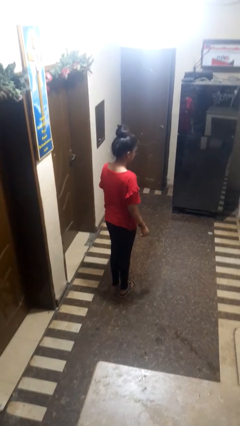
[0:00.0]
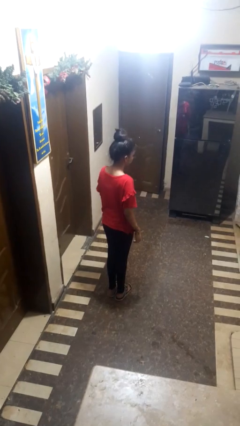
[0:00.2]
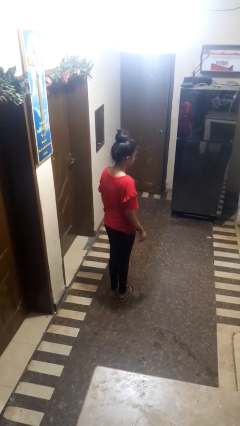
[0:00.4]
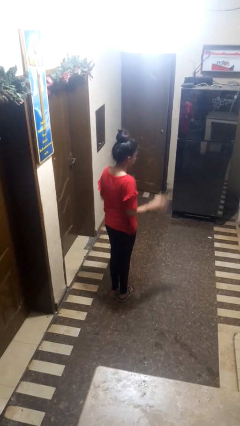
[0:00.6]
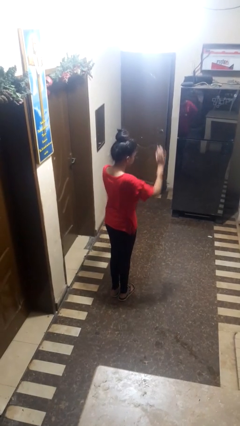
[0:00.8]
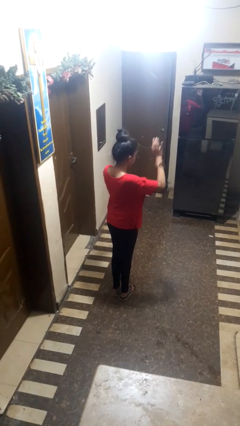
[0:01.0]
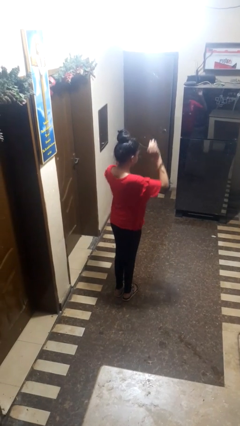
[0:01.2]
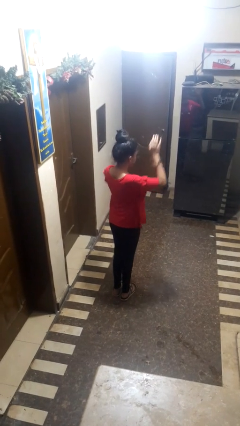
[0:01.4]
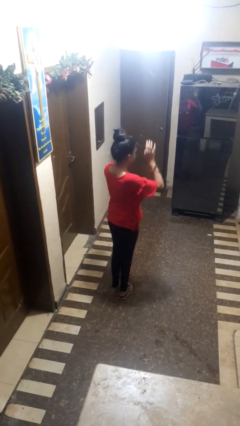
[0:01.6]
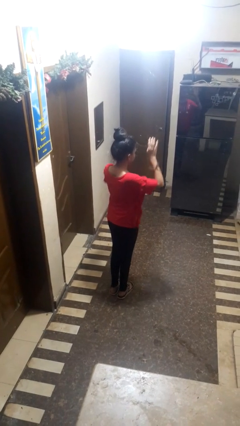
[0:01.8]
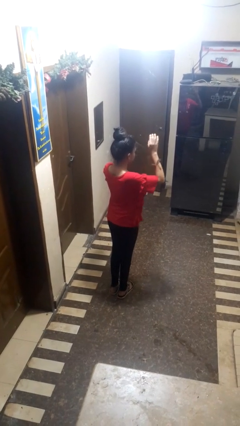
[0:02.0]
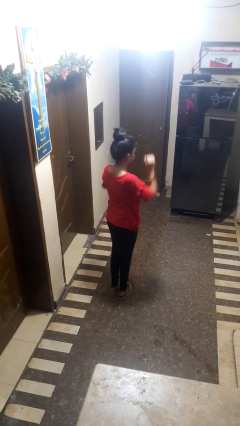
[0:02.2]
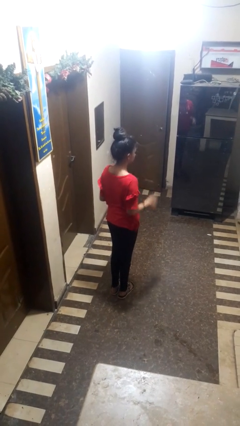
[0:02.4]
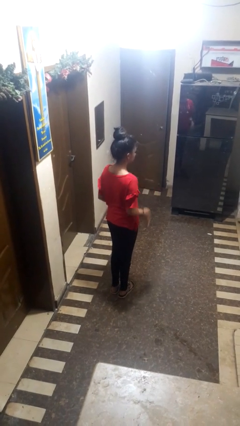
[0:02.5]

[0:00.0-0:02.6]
person dances in place

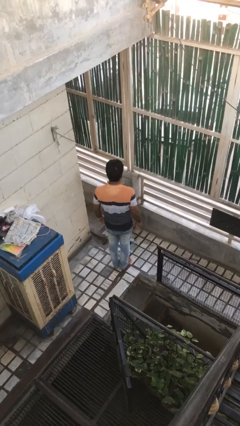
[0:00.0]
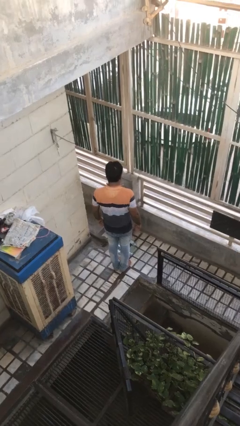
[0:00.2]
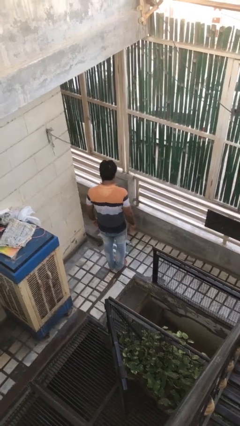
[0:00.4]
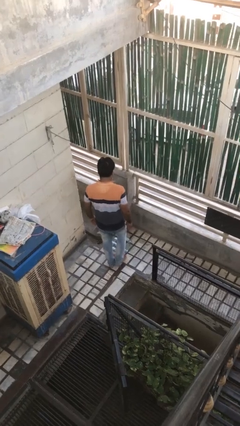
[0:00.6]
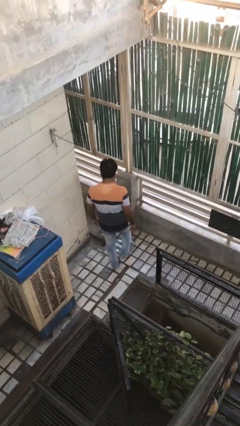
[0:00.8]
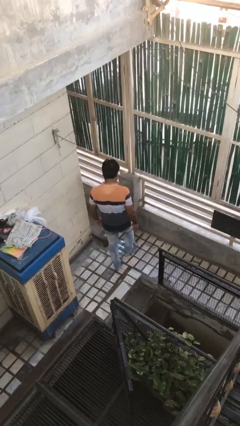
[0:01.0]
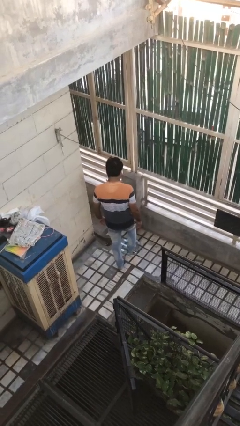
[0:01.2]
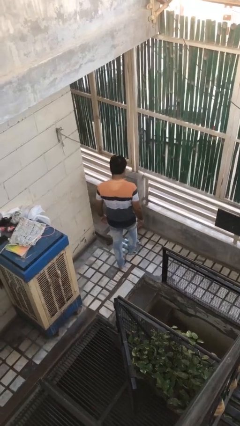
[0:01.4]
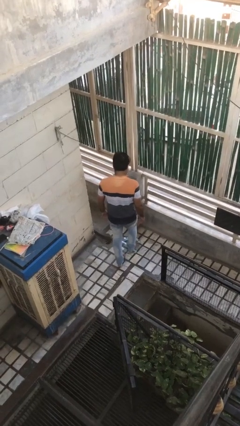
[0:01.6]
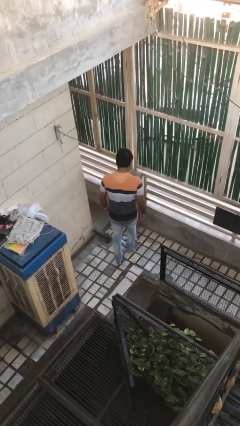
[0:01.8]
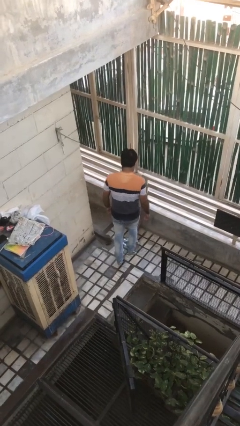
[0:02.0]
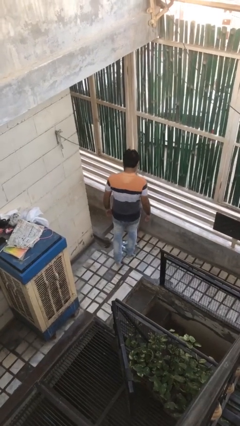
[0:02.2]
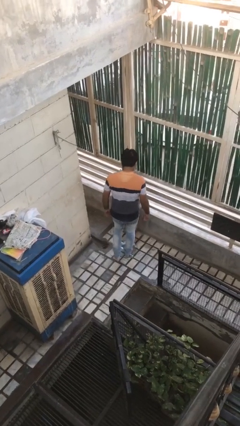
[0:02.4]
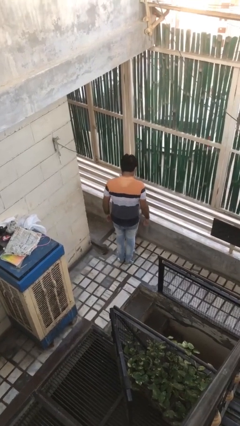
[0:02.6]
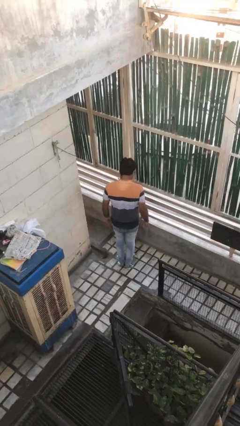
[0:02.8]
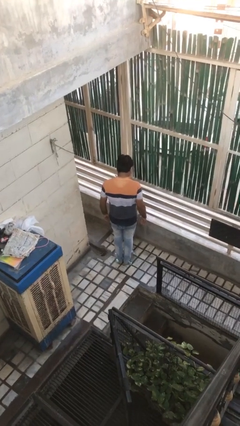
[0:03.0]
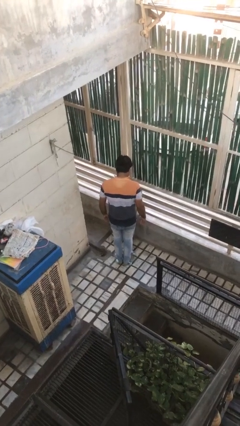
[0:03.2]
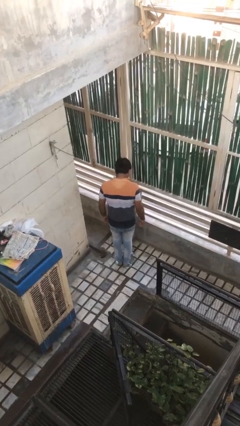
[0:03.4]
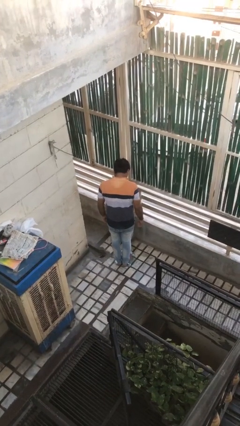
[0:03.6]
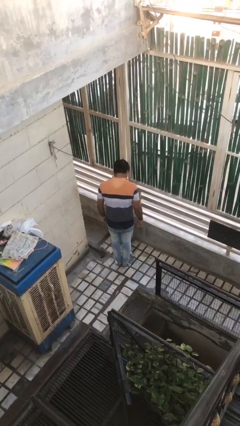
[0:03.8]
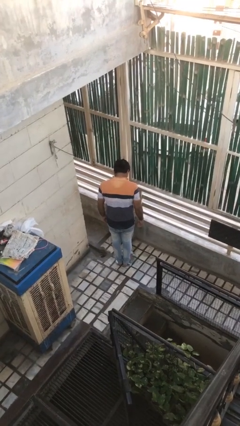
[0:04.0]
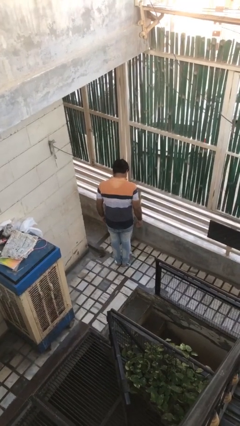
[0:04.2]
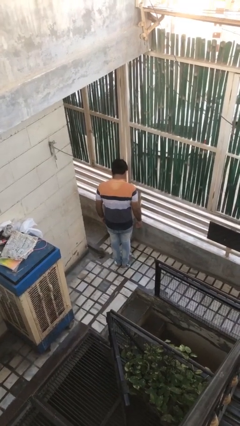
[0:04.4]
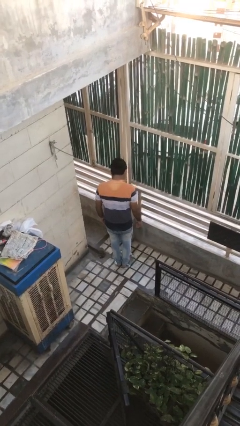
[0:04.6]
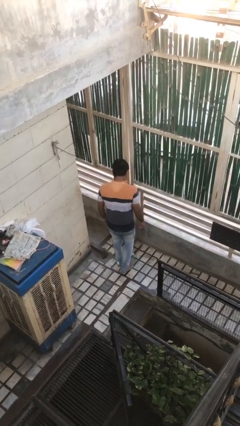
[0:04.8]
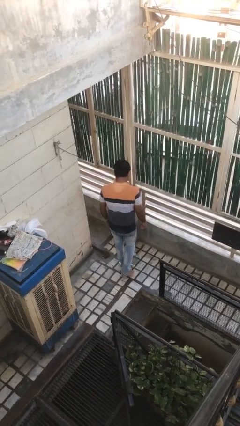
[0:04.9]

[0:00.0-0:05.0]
person uses bodyweight scale

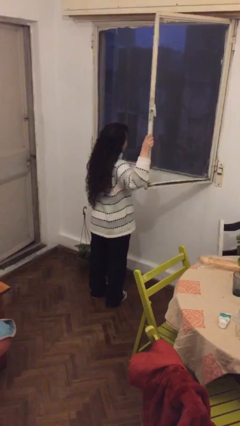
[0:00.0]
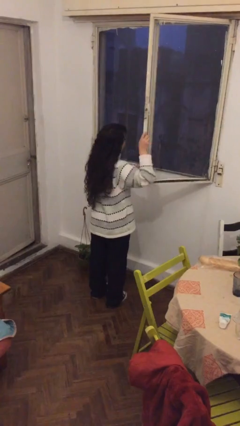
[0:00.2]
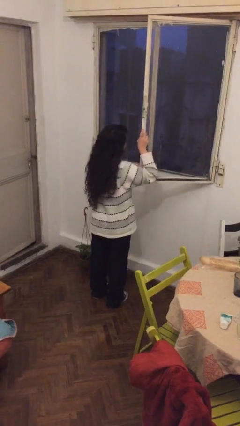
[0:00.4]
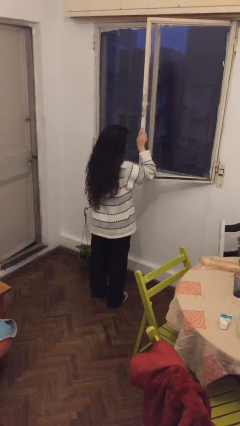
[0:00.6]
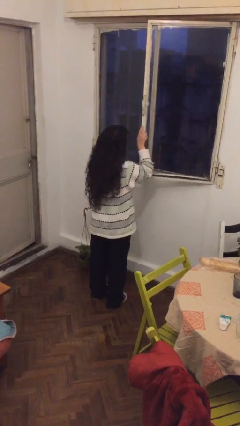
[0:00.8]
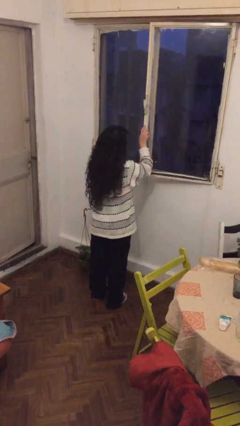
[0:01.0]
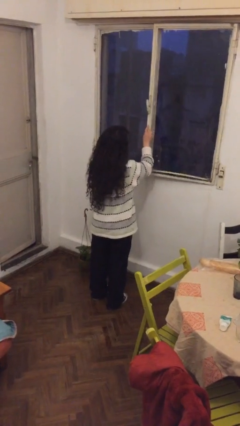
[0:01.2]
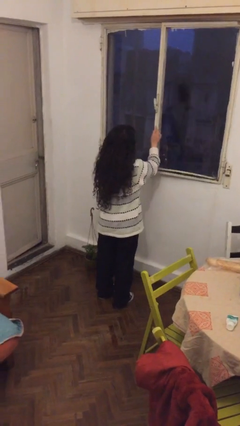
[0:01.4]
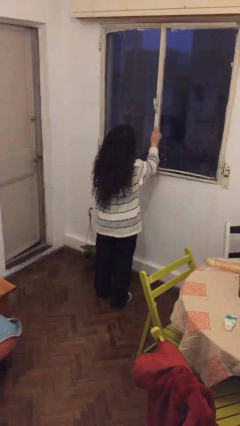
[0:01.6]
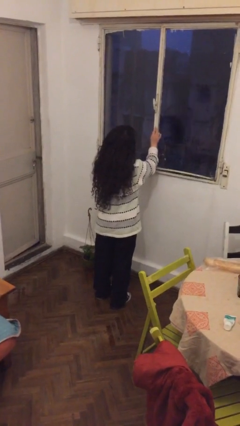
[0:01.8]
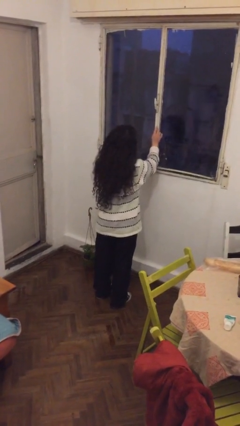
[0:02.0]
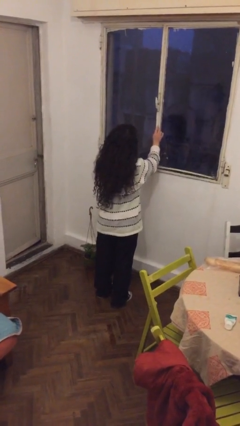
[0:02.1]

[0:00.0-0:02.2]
person closes home window

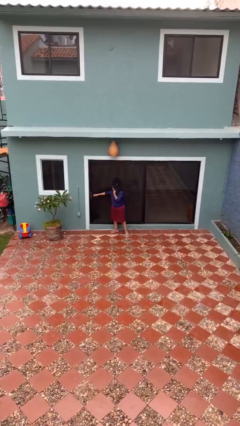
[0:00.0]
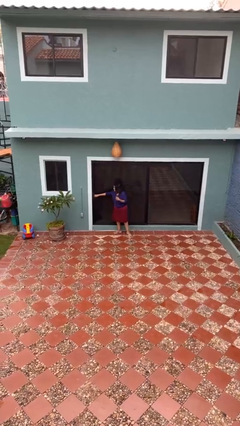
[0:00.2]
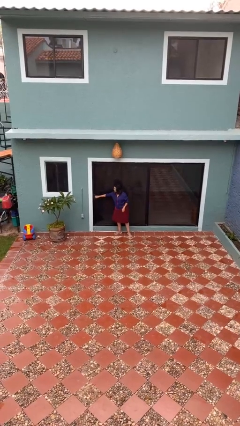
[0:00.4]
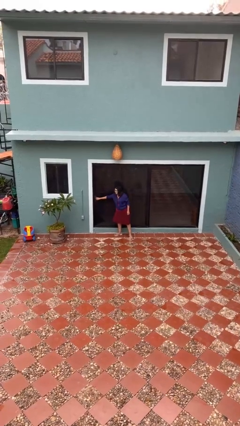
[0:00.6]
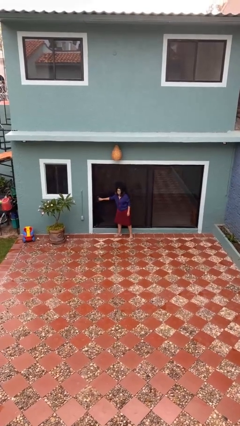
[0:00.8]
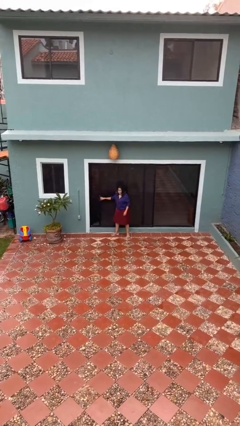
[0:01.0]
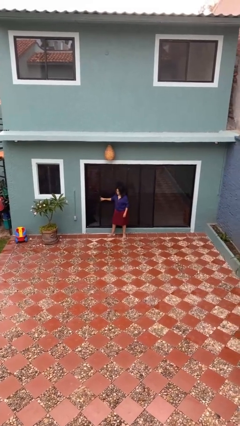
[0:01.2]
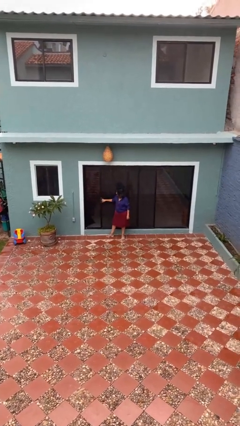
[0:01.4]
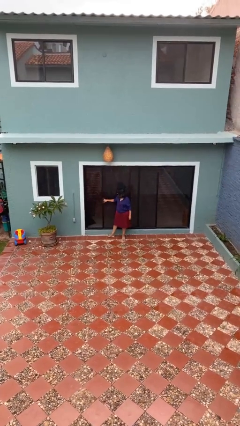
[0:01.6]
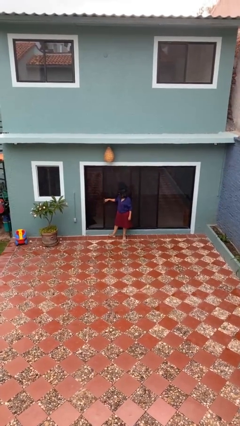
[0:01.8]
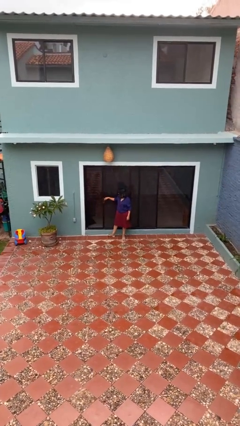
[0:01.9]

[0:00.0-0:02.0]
person opens sliding door

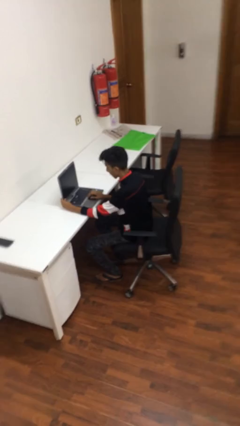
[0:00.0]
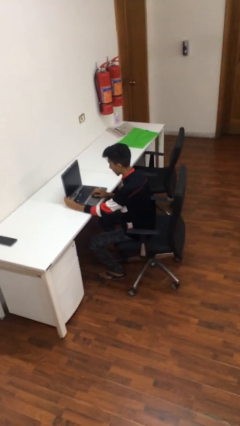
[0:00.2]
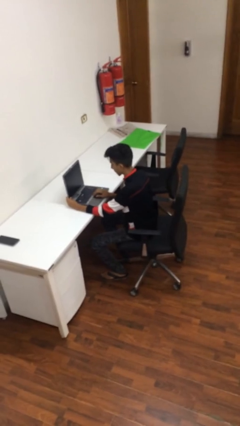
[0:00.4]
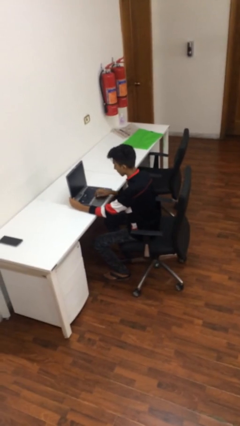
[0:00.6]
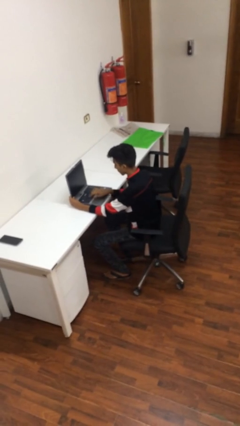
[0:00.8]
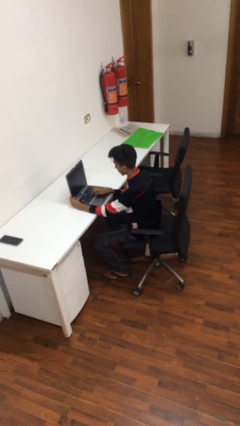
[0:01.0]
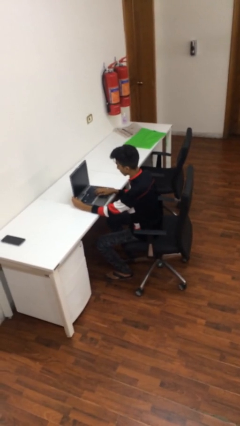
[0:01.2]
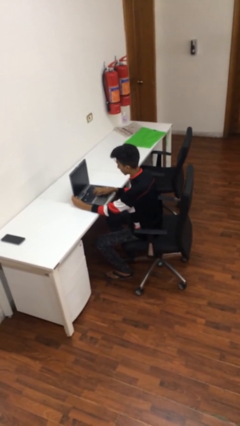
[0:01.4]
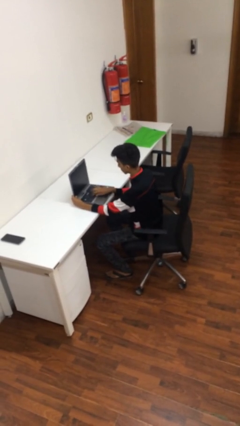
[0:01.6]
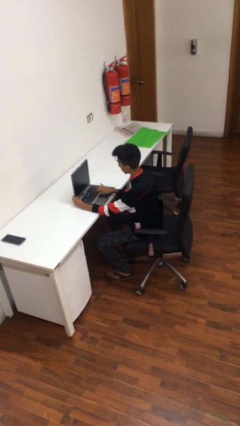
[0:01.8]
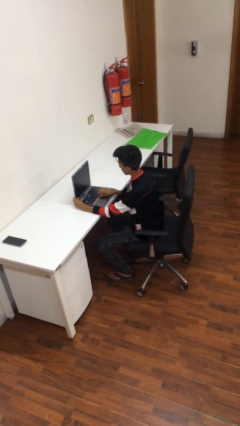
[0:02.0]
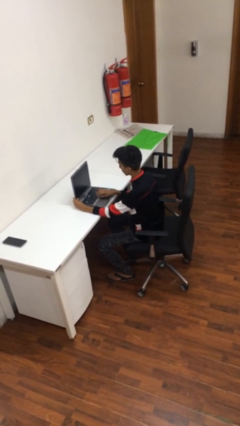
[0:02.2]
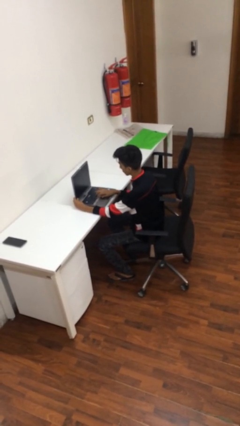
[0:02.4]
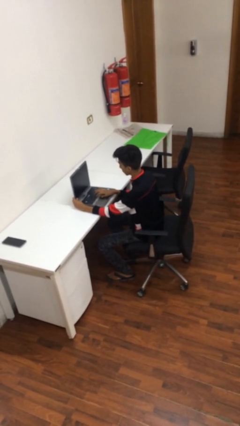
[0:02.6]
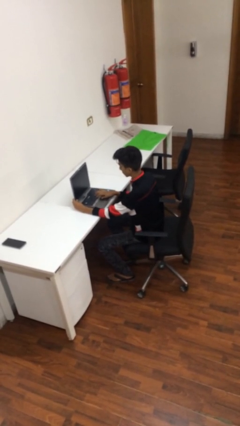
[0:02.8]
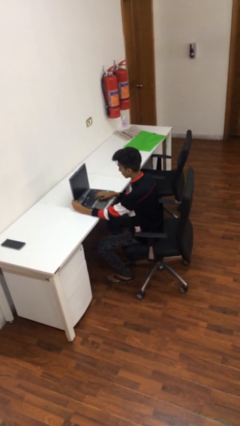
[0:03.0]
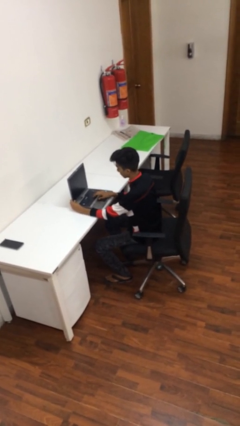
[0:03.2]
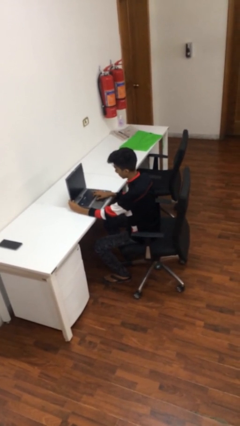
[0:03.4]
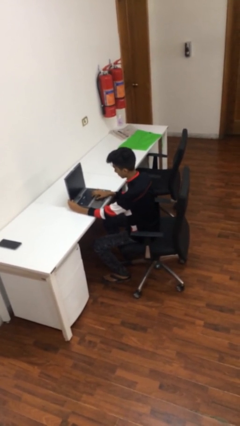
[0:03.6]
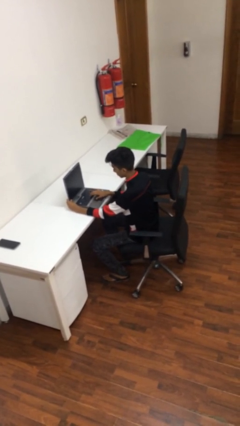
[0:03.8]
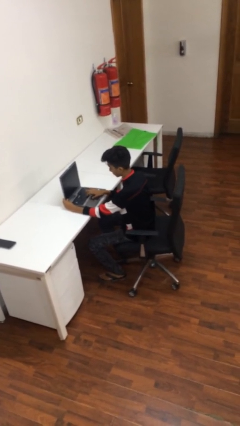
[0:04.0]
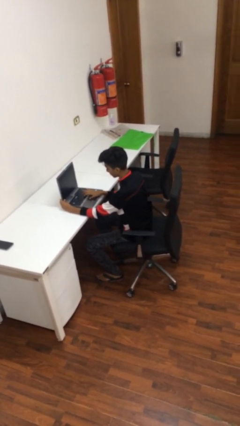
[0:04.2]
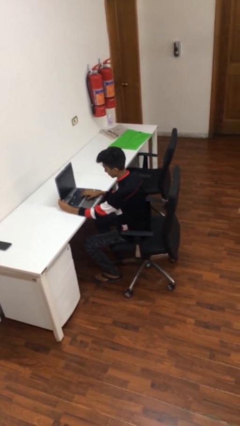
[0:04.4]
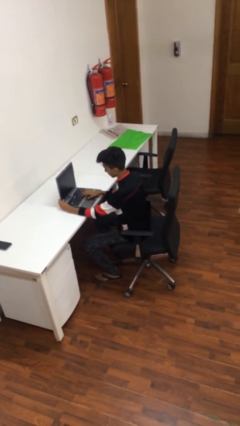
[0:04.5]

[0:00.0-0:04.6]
person interacts with laptop

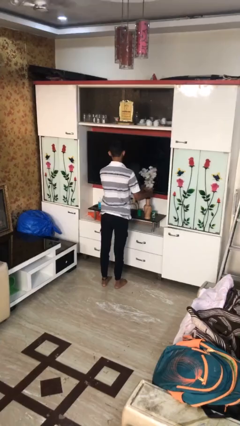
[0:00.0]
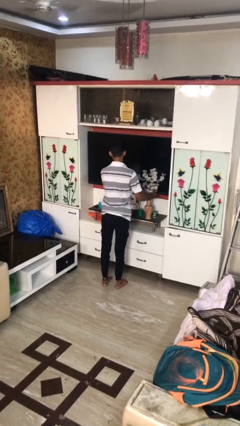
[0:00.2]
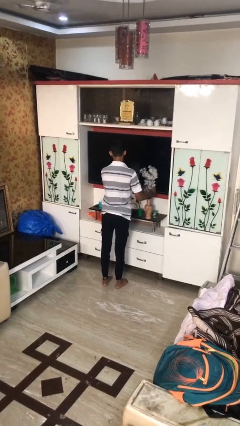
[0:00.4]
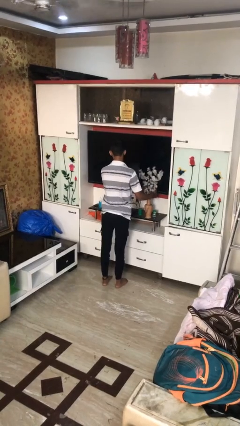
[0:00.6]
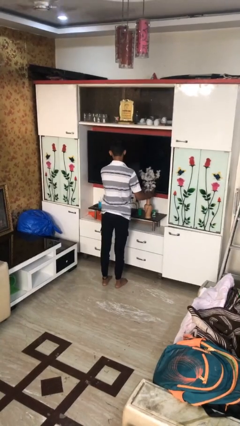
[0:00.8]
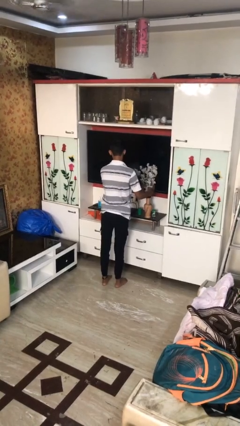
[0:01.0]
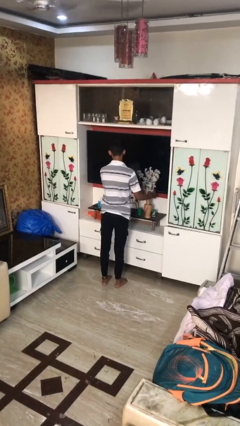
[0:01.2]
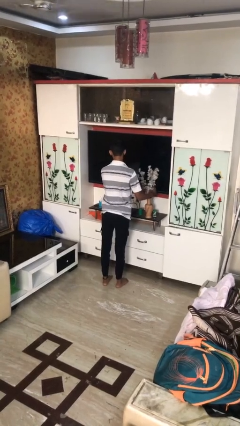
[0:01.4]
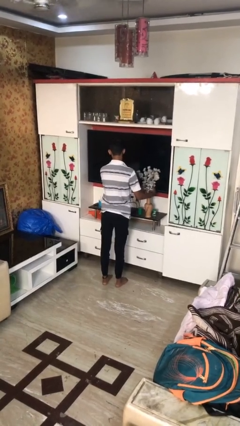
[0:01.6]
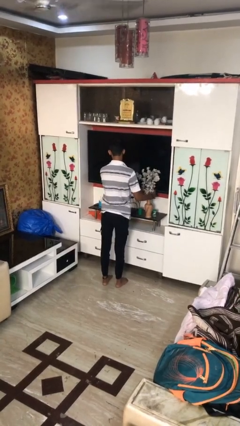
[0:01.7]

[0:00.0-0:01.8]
person arranges flowers in vase
